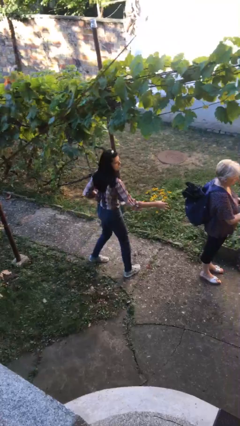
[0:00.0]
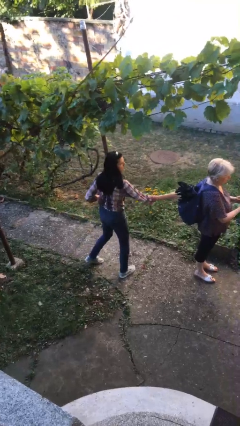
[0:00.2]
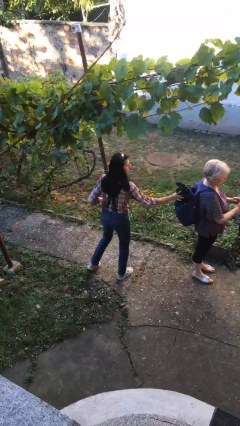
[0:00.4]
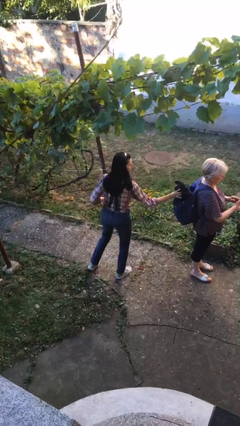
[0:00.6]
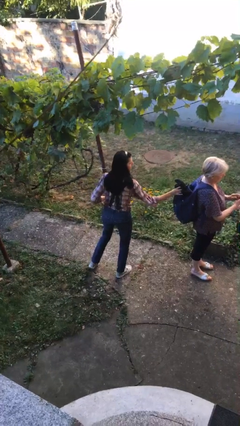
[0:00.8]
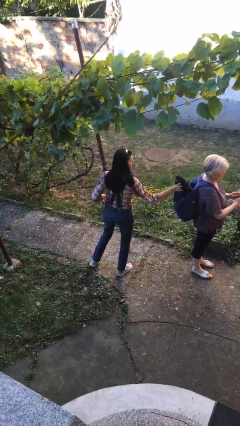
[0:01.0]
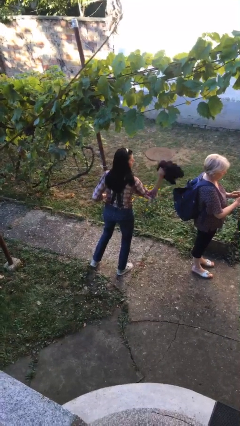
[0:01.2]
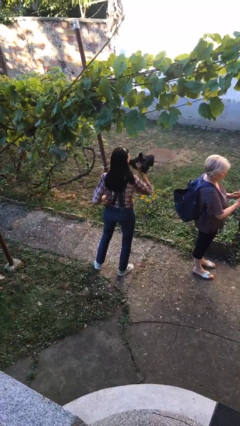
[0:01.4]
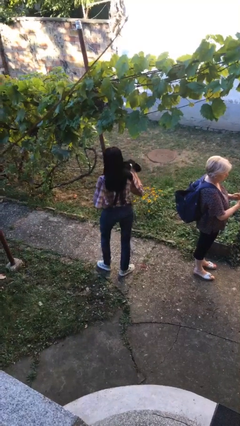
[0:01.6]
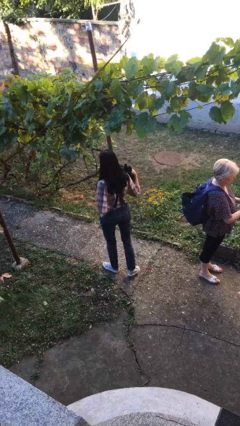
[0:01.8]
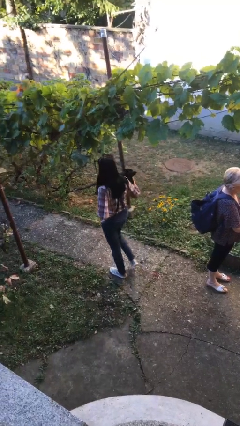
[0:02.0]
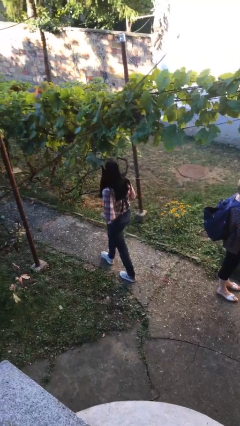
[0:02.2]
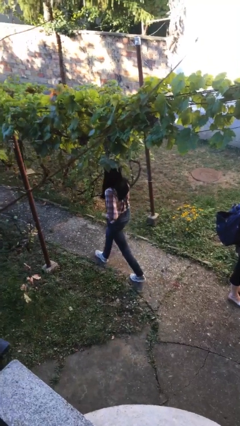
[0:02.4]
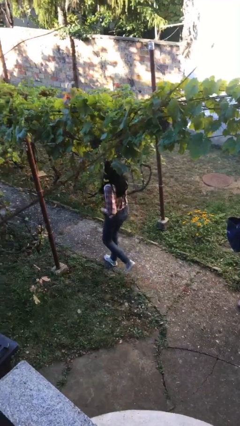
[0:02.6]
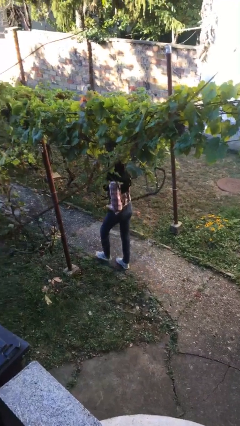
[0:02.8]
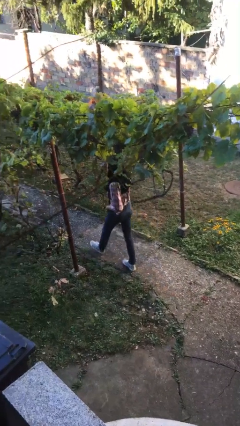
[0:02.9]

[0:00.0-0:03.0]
person steals object from person

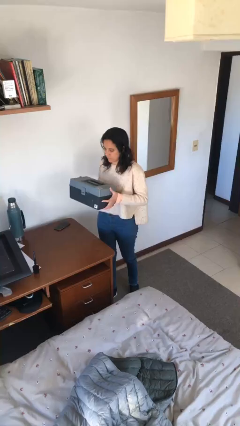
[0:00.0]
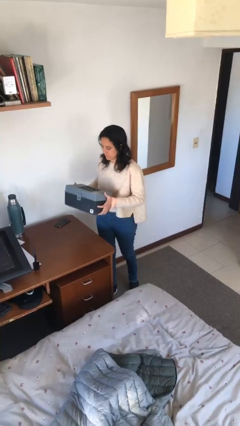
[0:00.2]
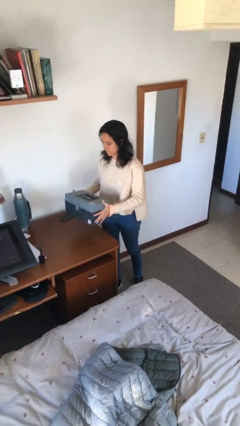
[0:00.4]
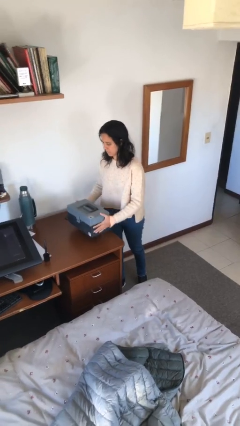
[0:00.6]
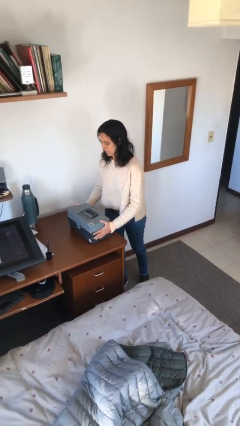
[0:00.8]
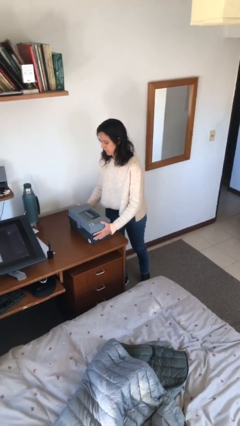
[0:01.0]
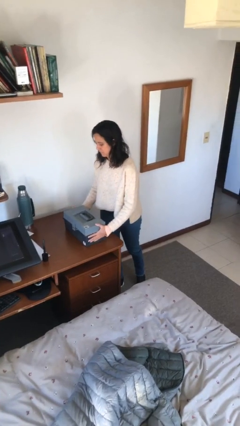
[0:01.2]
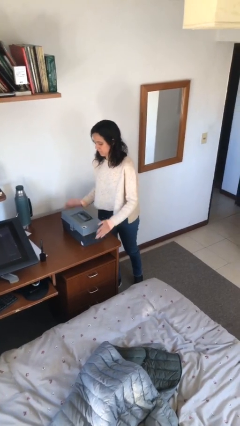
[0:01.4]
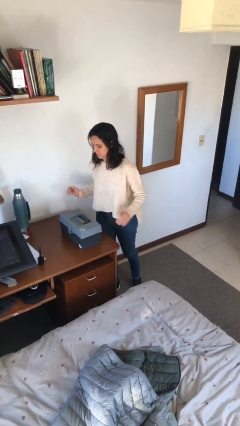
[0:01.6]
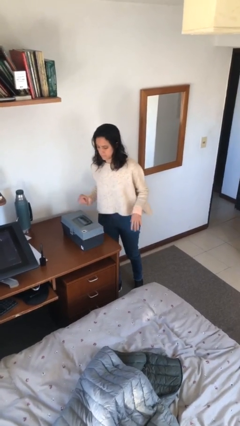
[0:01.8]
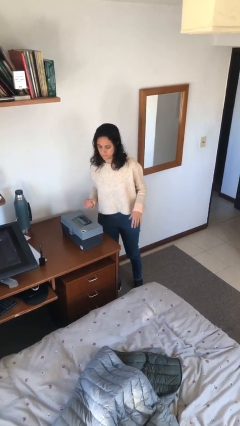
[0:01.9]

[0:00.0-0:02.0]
person puts down object on table

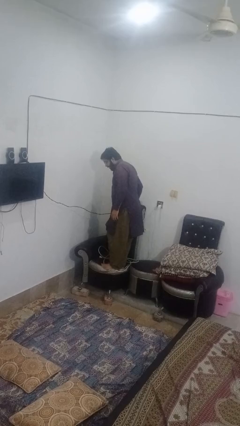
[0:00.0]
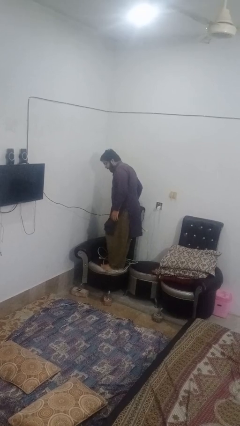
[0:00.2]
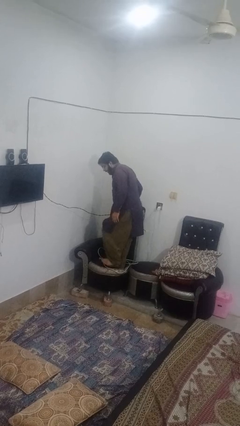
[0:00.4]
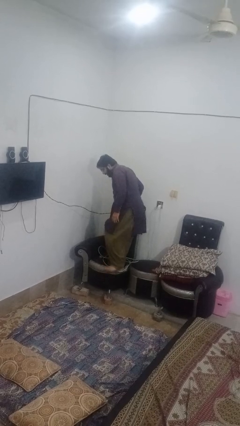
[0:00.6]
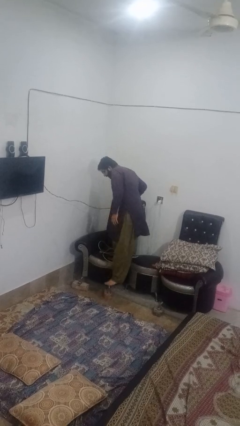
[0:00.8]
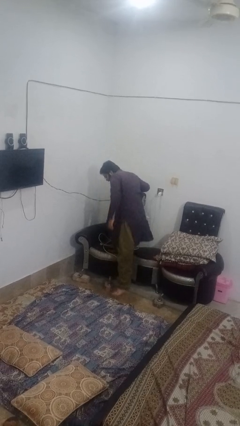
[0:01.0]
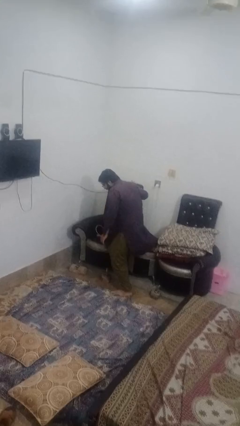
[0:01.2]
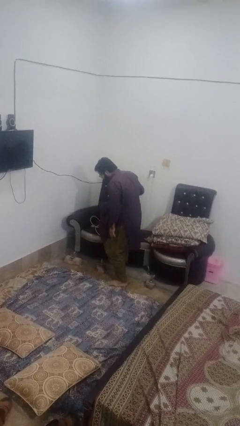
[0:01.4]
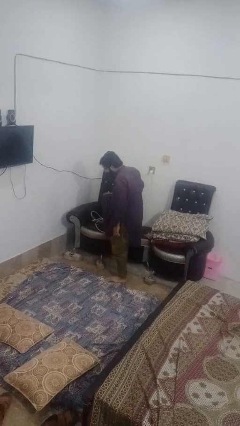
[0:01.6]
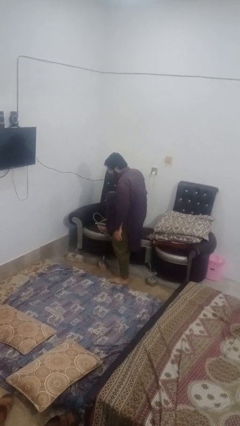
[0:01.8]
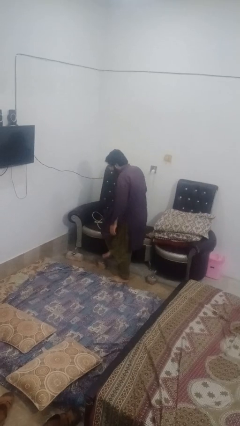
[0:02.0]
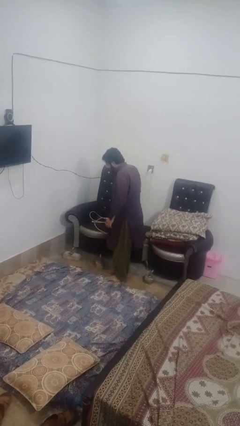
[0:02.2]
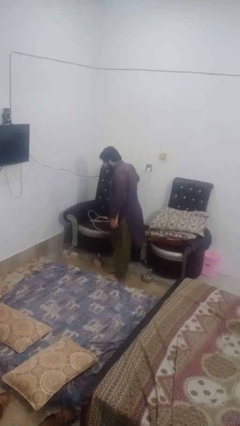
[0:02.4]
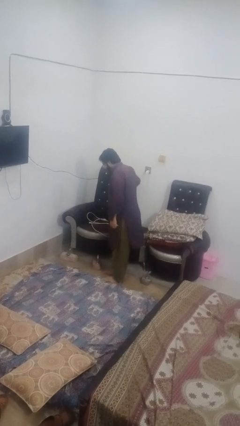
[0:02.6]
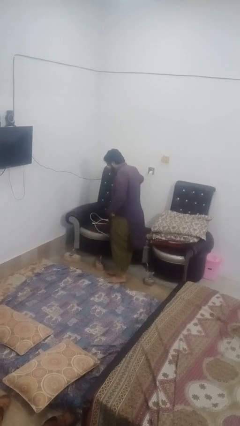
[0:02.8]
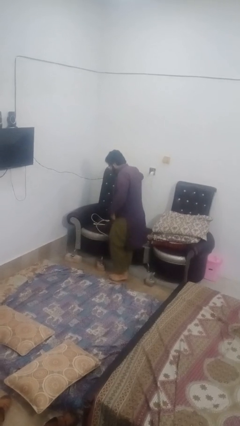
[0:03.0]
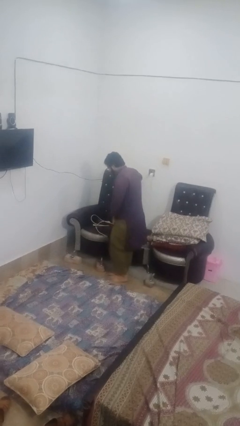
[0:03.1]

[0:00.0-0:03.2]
person climbs off couch

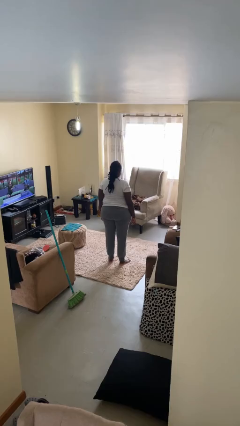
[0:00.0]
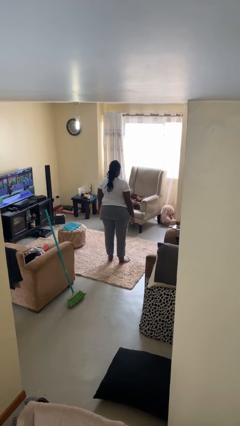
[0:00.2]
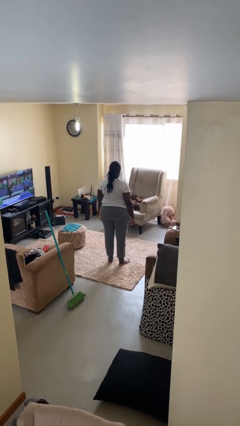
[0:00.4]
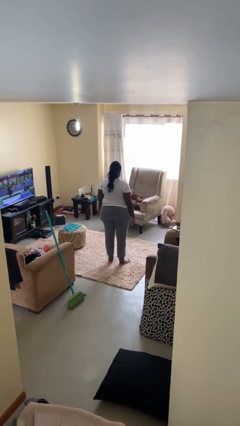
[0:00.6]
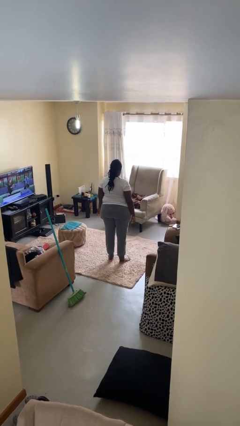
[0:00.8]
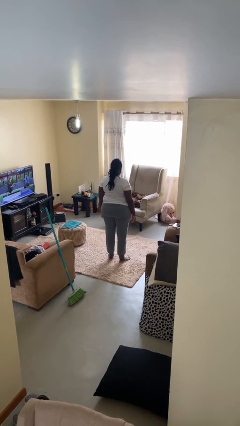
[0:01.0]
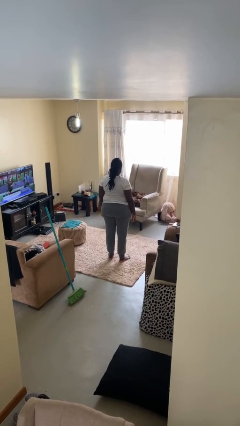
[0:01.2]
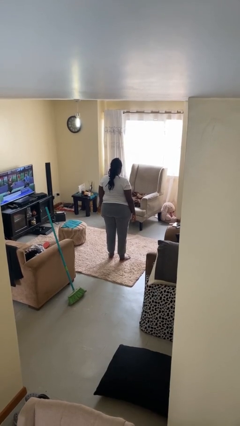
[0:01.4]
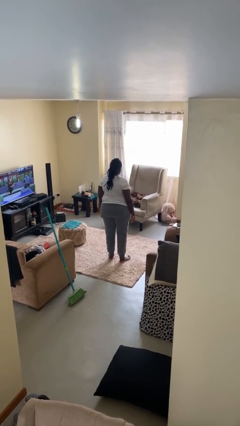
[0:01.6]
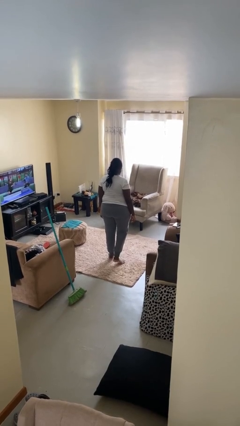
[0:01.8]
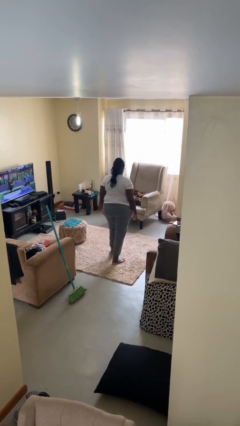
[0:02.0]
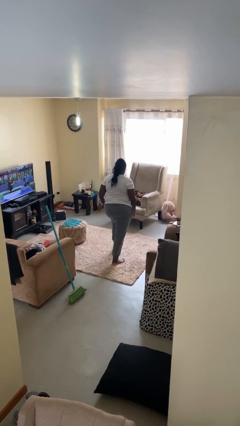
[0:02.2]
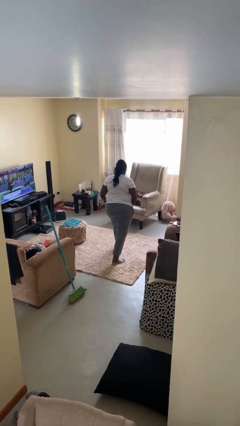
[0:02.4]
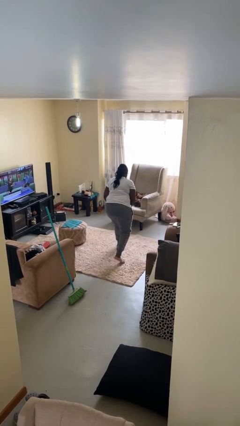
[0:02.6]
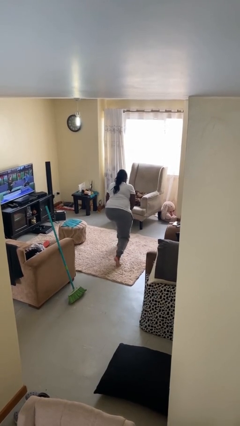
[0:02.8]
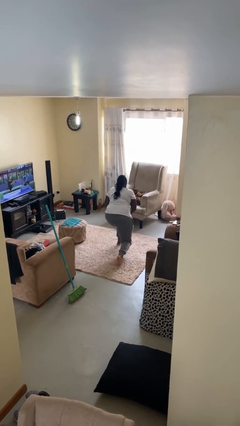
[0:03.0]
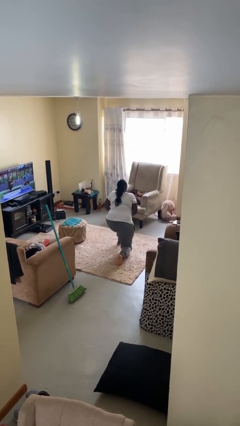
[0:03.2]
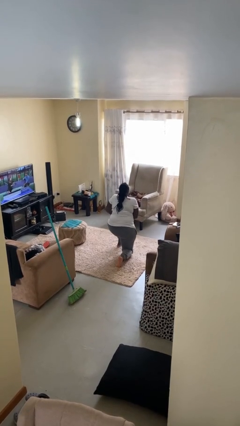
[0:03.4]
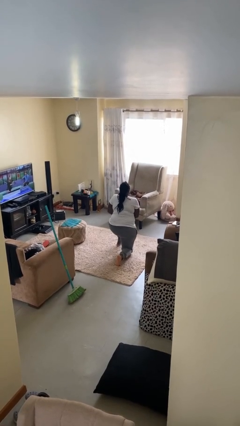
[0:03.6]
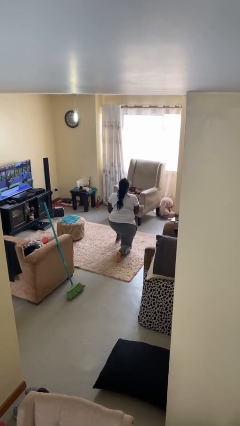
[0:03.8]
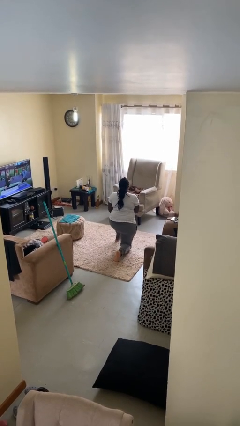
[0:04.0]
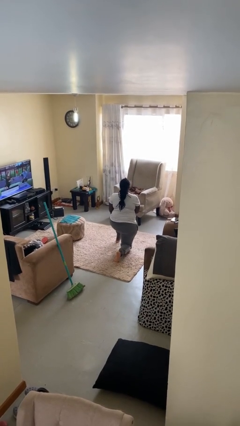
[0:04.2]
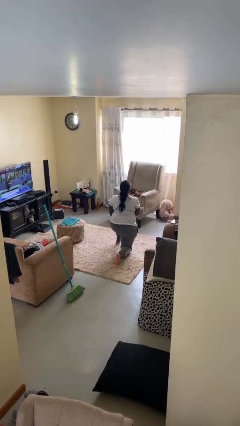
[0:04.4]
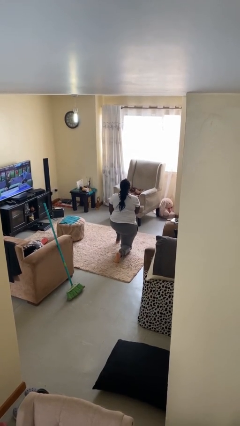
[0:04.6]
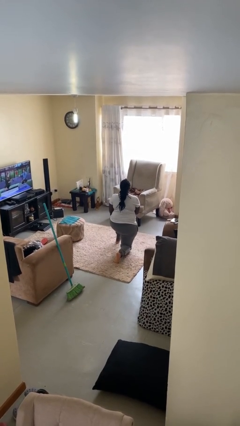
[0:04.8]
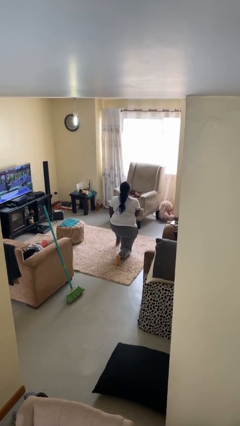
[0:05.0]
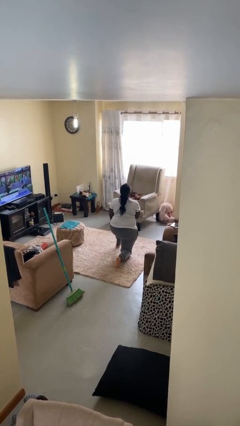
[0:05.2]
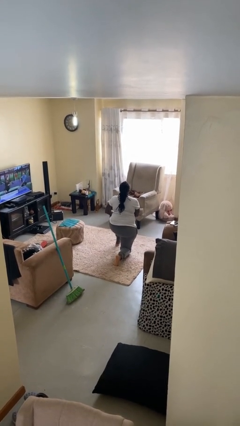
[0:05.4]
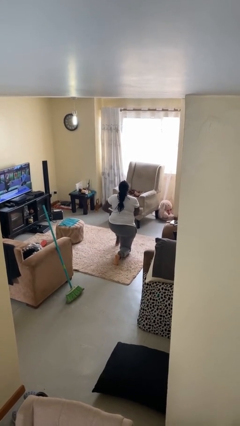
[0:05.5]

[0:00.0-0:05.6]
person kneels

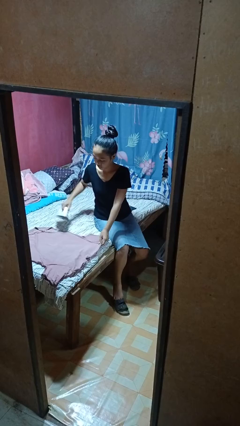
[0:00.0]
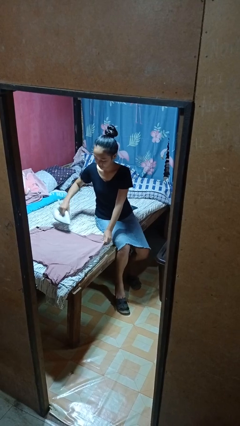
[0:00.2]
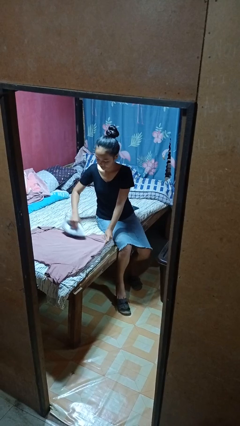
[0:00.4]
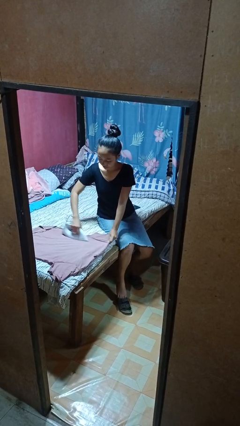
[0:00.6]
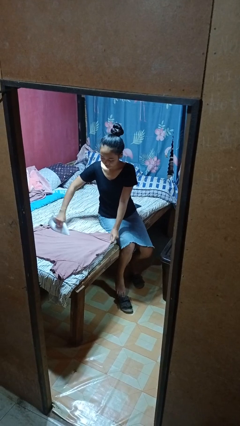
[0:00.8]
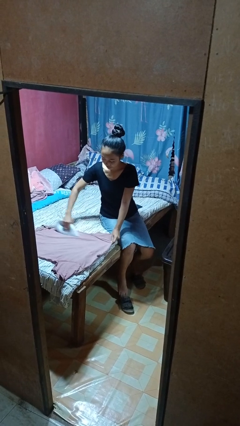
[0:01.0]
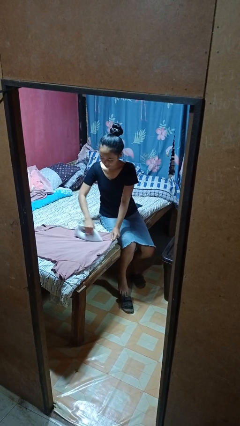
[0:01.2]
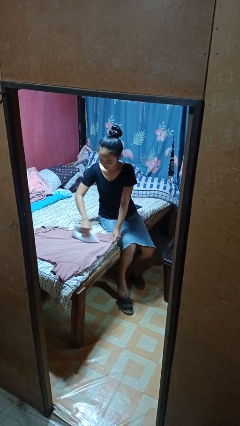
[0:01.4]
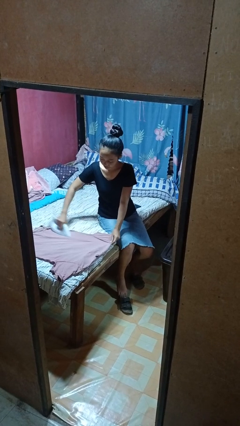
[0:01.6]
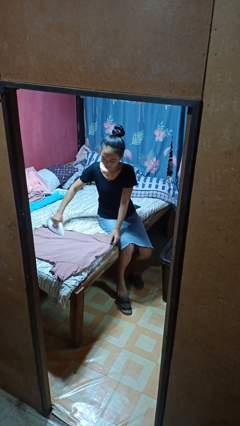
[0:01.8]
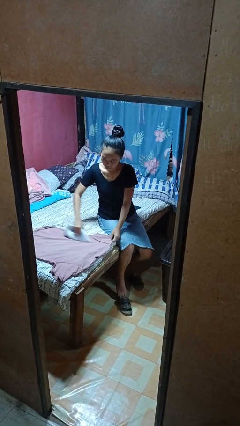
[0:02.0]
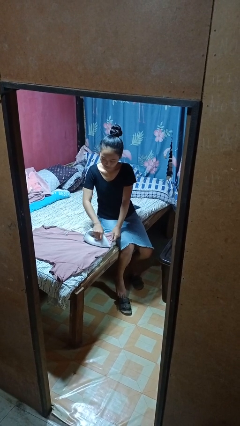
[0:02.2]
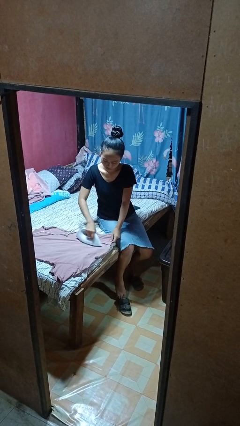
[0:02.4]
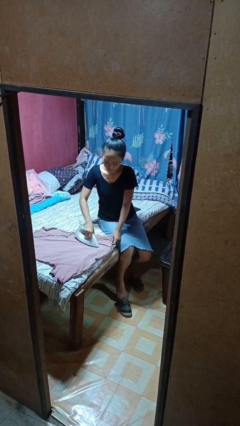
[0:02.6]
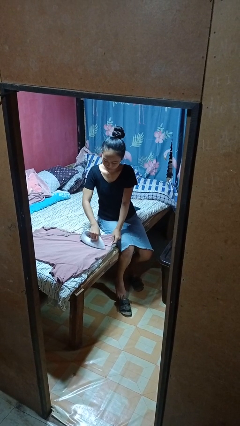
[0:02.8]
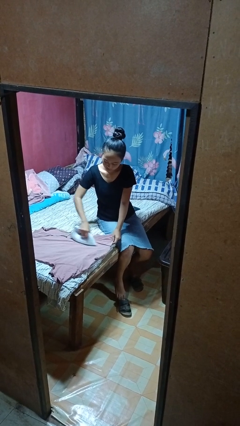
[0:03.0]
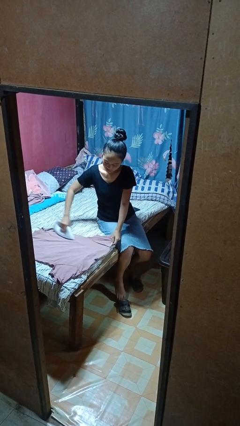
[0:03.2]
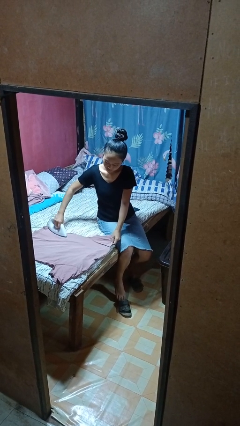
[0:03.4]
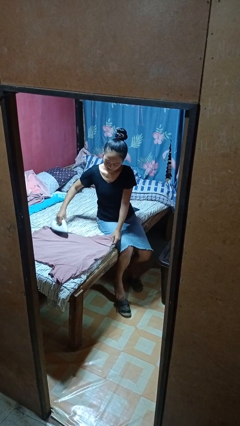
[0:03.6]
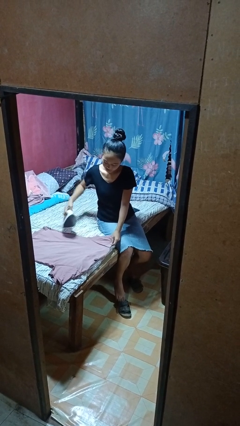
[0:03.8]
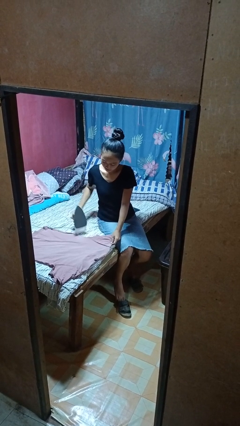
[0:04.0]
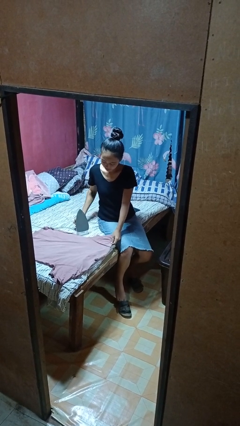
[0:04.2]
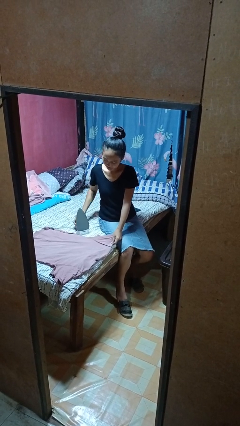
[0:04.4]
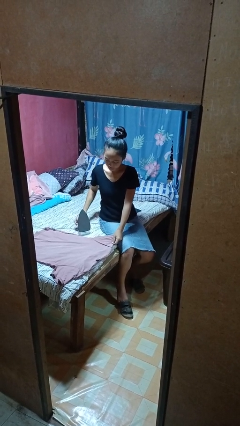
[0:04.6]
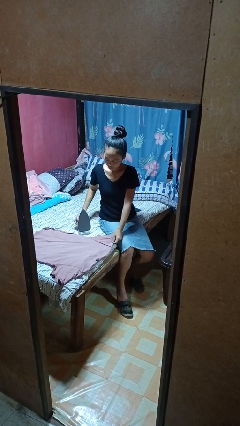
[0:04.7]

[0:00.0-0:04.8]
person irons clothes
